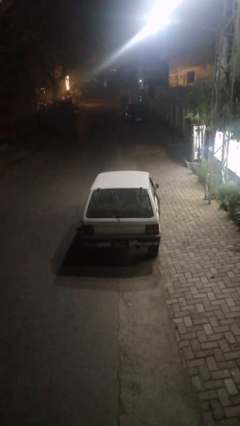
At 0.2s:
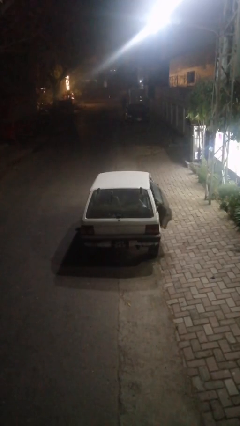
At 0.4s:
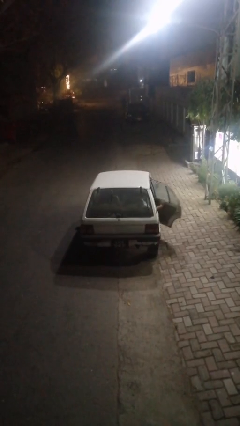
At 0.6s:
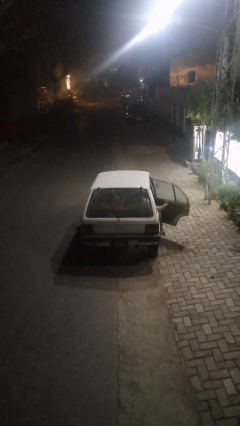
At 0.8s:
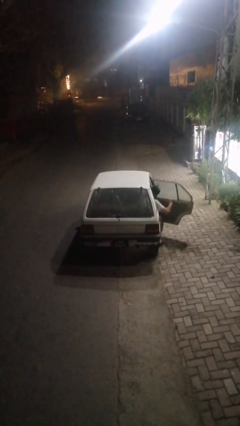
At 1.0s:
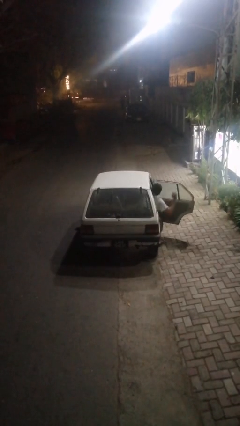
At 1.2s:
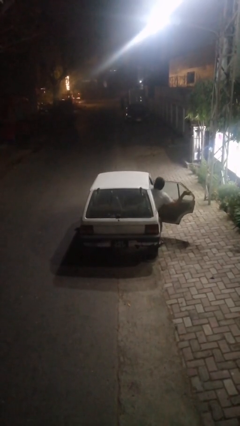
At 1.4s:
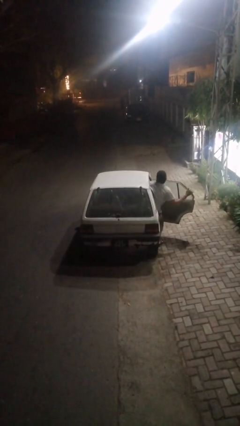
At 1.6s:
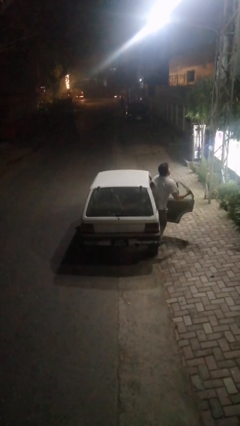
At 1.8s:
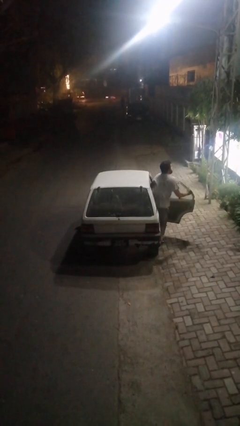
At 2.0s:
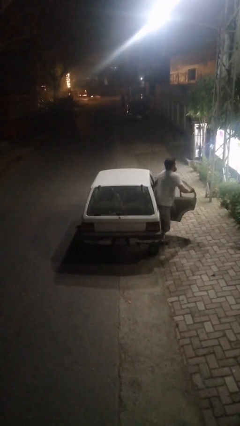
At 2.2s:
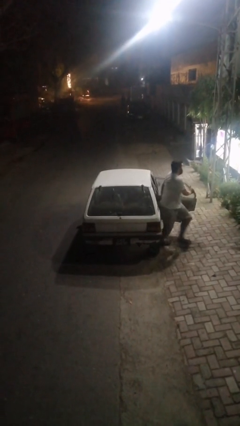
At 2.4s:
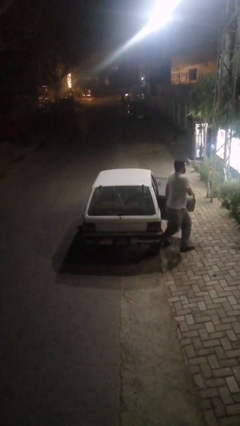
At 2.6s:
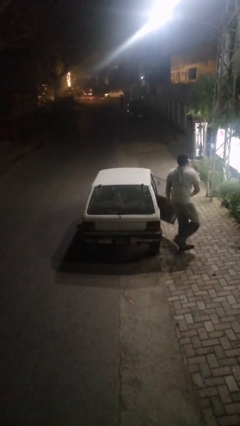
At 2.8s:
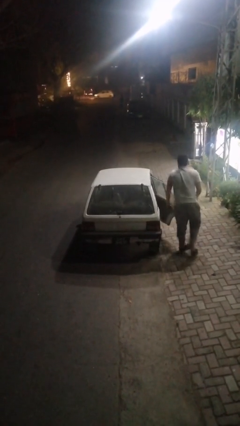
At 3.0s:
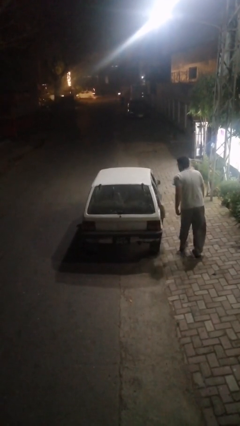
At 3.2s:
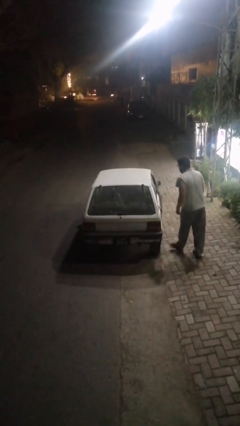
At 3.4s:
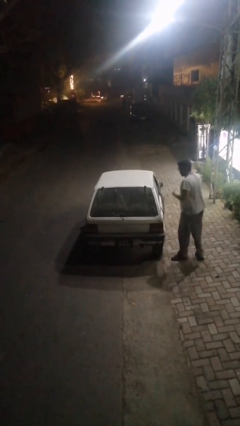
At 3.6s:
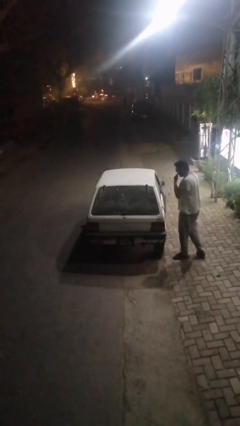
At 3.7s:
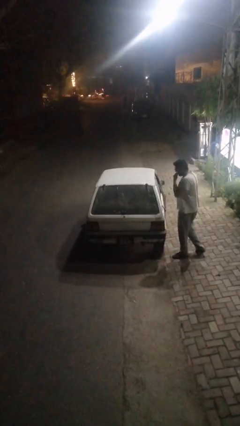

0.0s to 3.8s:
car drops off person

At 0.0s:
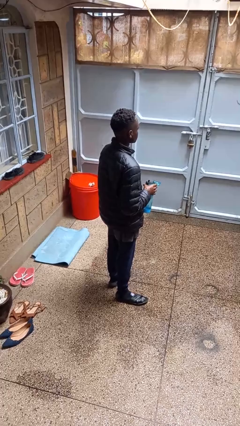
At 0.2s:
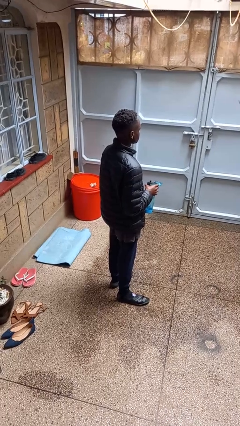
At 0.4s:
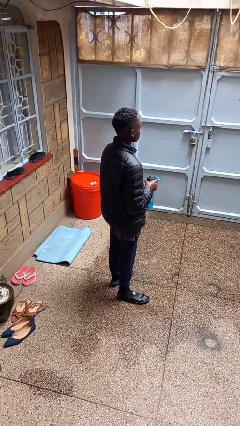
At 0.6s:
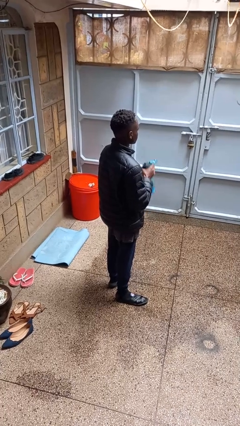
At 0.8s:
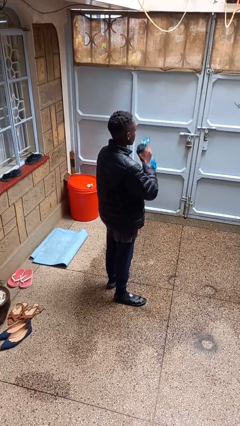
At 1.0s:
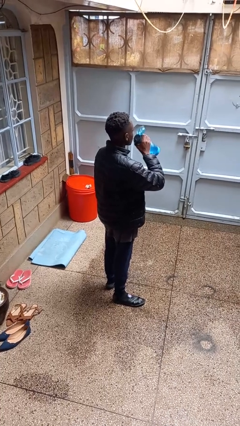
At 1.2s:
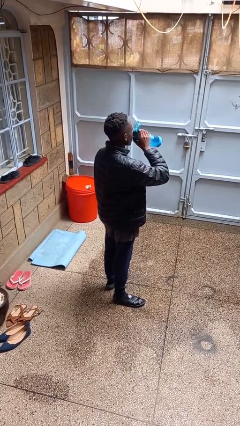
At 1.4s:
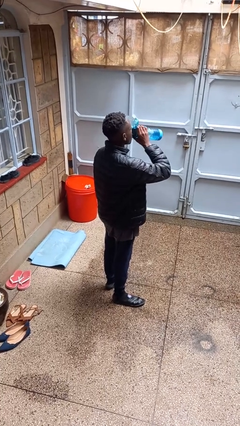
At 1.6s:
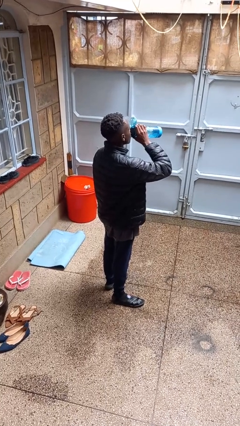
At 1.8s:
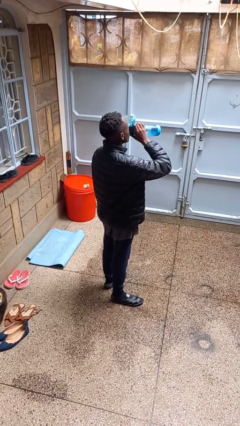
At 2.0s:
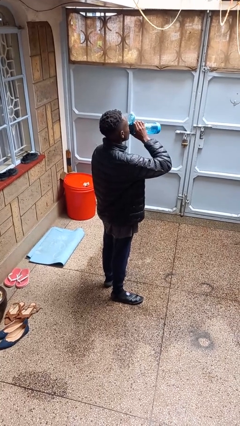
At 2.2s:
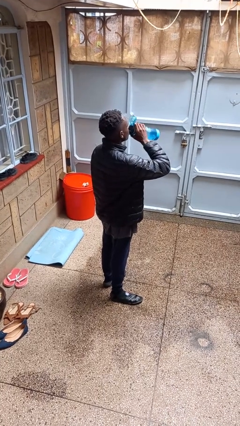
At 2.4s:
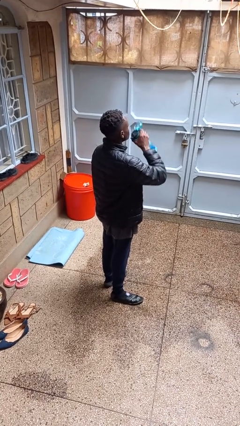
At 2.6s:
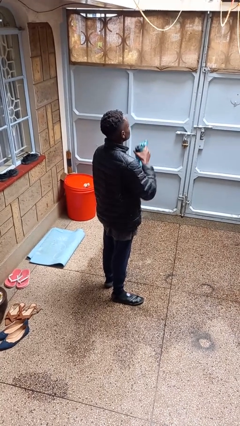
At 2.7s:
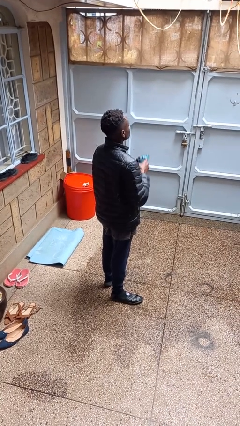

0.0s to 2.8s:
person drinks from bottle

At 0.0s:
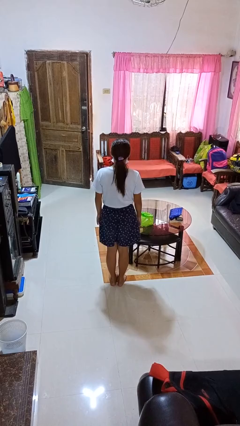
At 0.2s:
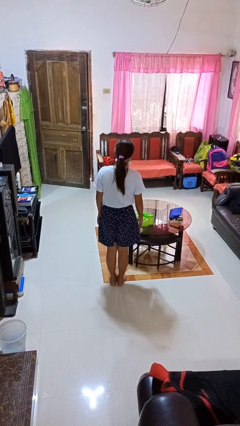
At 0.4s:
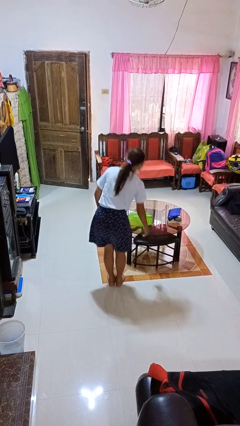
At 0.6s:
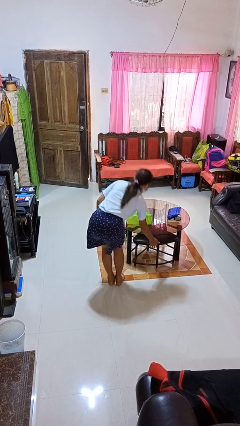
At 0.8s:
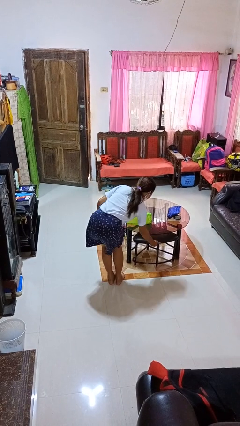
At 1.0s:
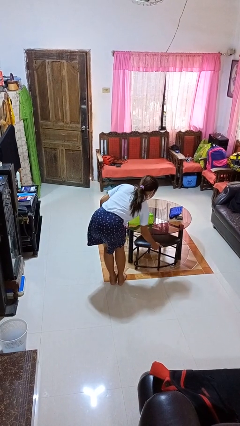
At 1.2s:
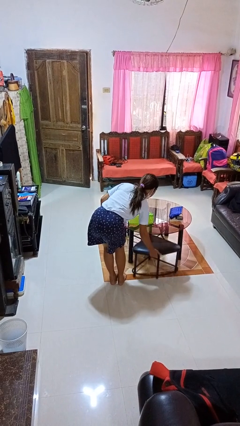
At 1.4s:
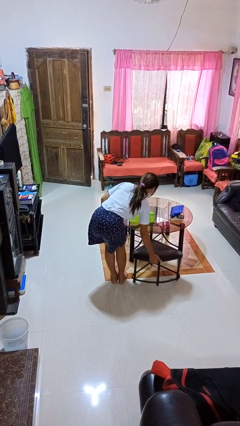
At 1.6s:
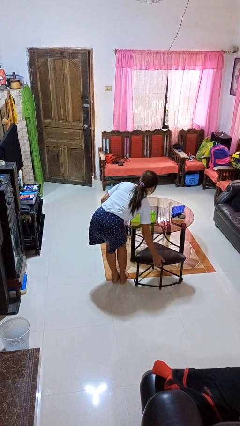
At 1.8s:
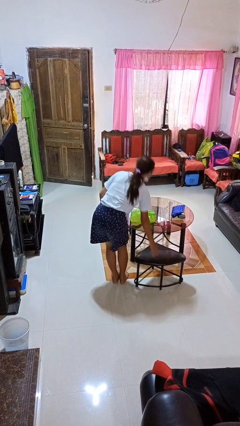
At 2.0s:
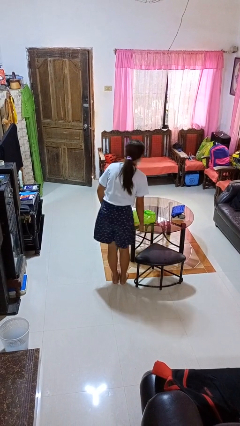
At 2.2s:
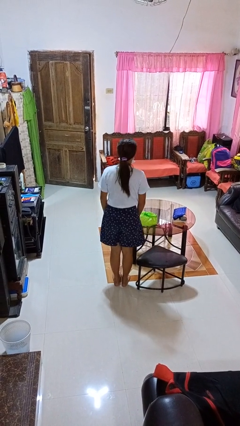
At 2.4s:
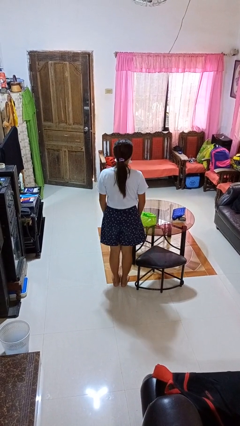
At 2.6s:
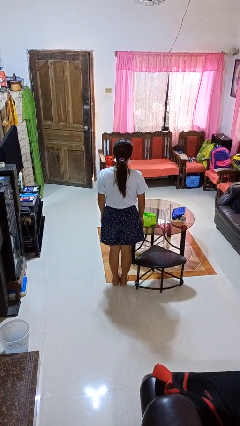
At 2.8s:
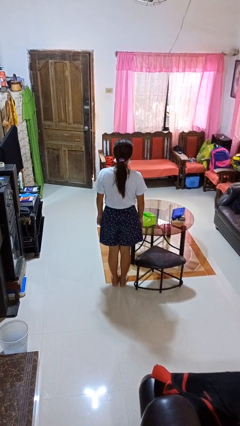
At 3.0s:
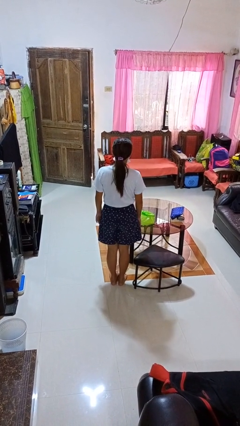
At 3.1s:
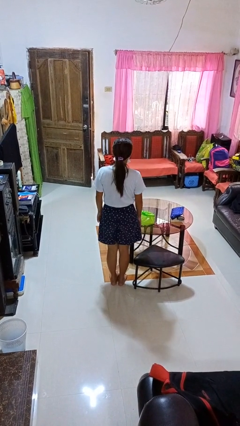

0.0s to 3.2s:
person pulls out chair

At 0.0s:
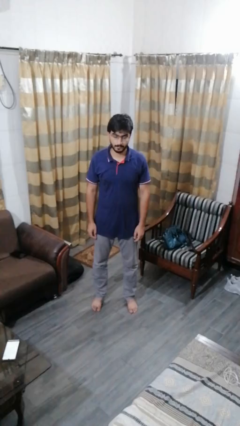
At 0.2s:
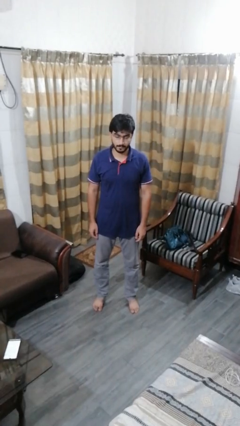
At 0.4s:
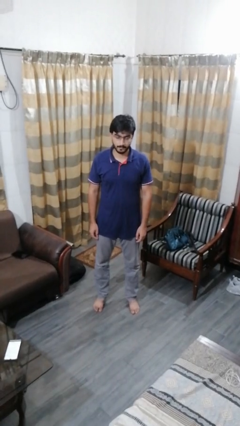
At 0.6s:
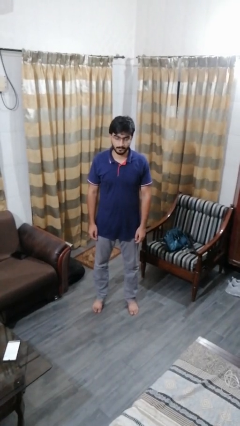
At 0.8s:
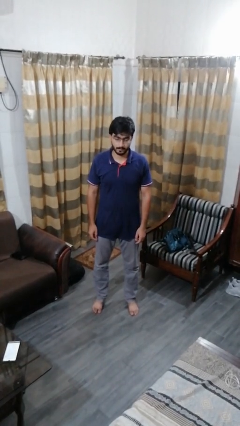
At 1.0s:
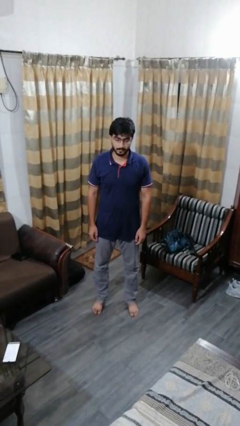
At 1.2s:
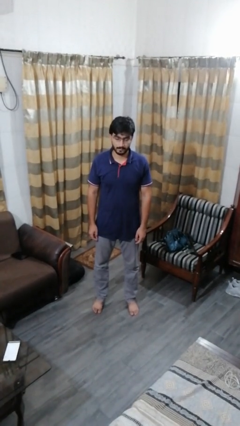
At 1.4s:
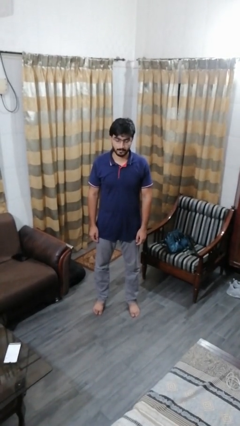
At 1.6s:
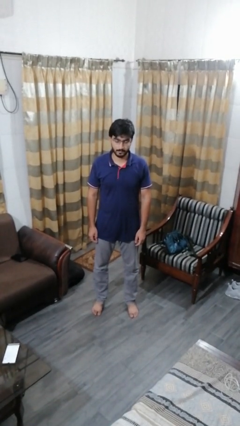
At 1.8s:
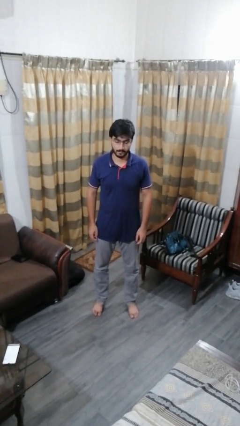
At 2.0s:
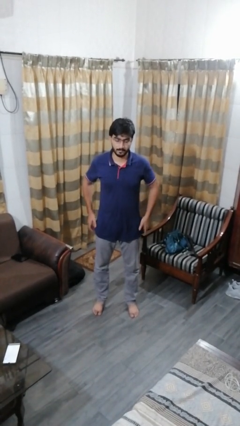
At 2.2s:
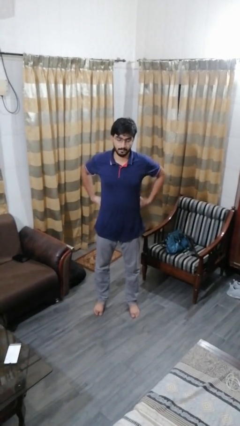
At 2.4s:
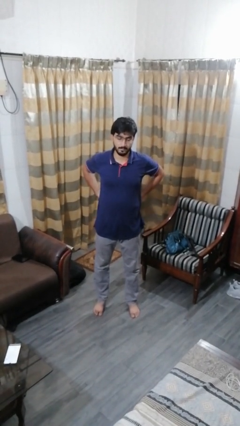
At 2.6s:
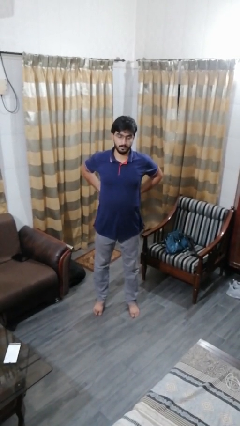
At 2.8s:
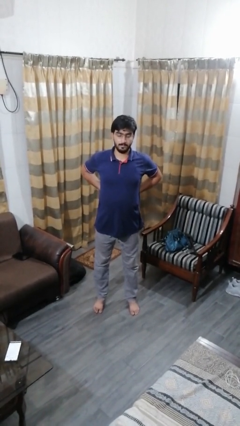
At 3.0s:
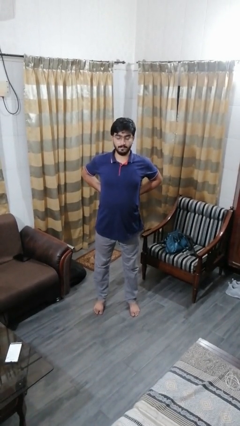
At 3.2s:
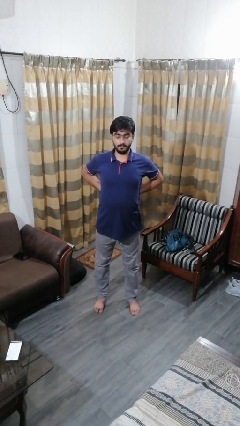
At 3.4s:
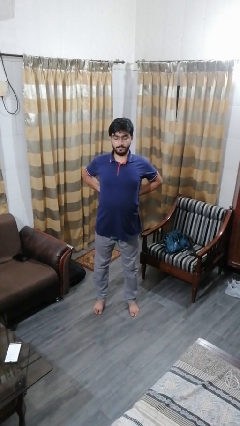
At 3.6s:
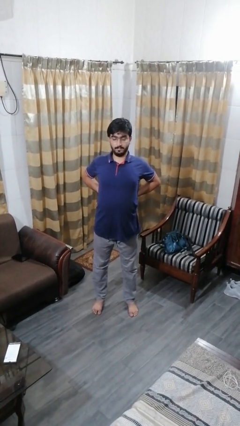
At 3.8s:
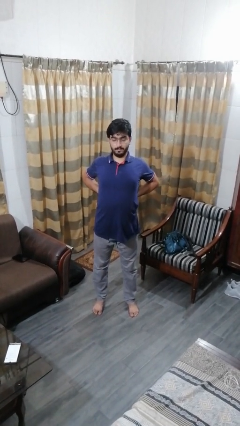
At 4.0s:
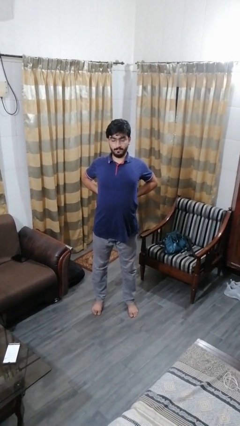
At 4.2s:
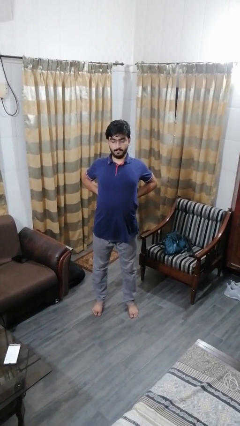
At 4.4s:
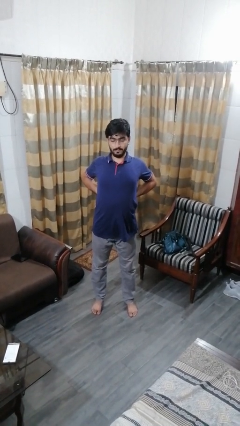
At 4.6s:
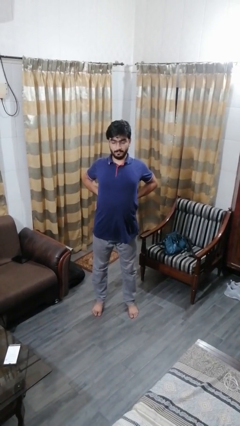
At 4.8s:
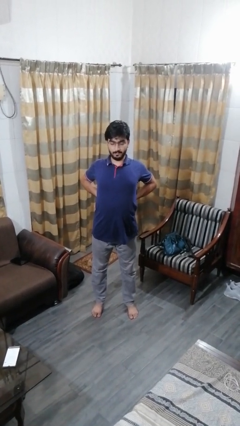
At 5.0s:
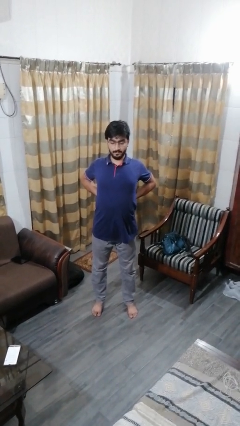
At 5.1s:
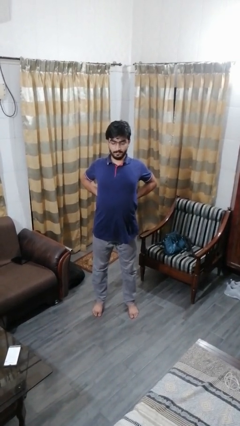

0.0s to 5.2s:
person stretches back

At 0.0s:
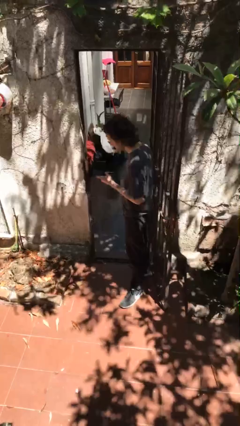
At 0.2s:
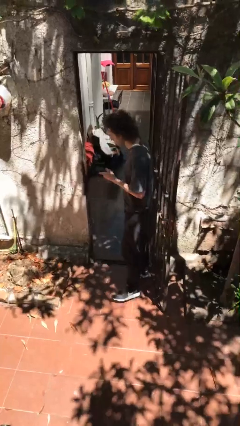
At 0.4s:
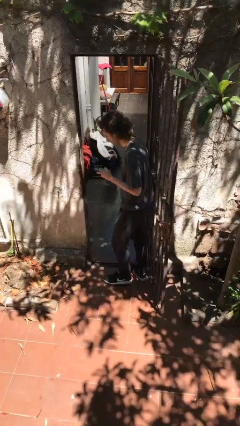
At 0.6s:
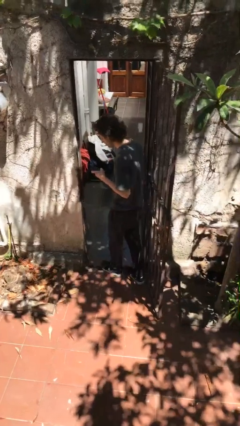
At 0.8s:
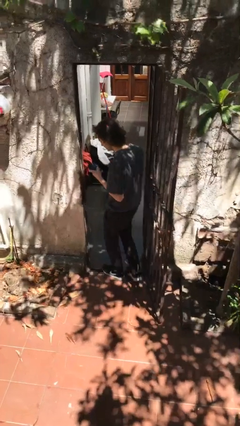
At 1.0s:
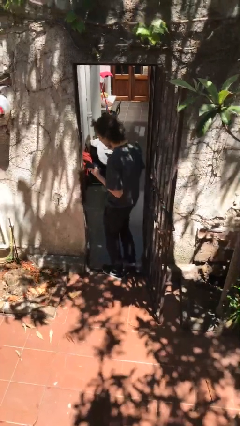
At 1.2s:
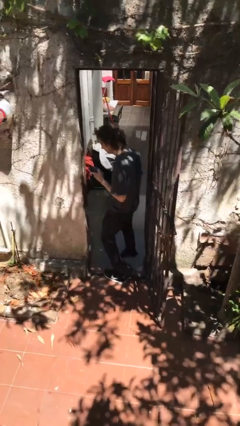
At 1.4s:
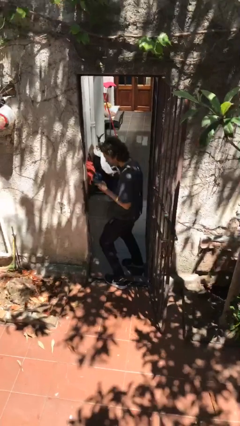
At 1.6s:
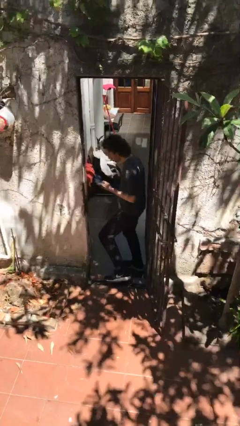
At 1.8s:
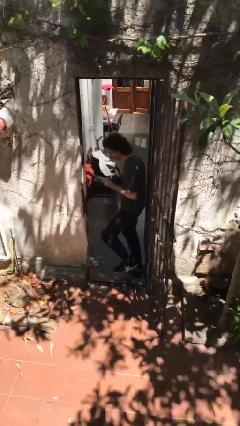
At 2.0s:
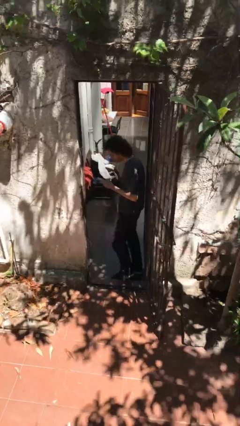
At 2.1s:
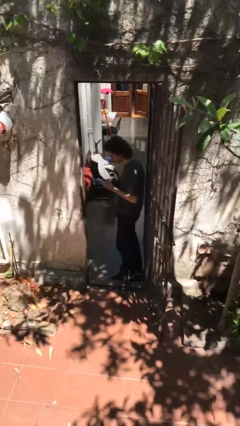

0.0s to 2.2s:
person exits scene through structure

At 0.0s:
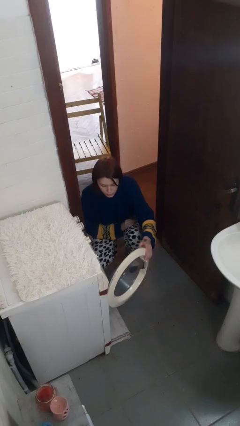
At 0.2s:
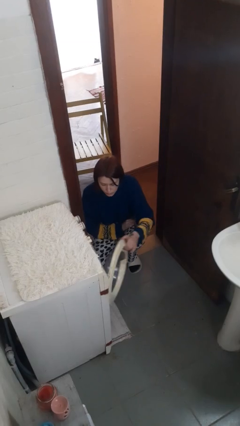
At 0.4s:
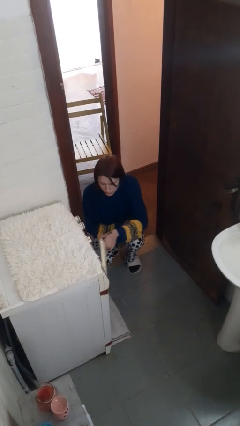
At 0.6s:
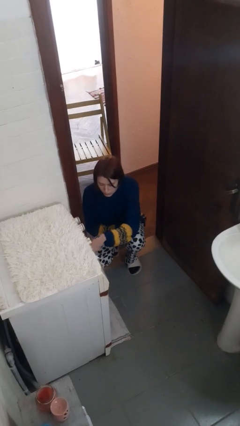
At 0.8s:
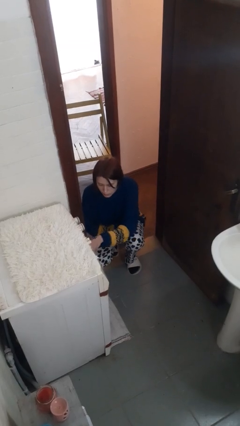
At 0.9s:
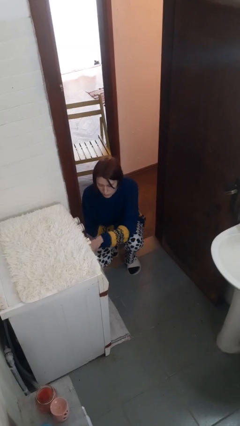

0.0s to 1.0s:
person closes clothes washer
